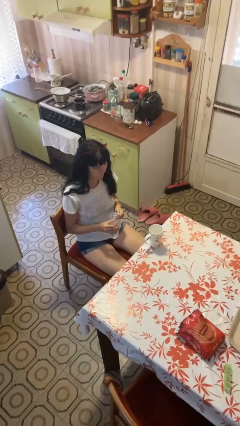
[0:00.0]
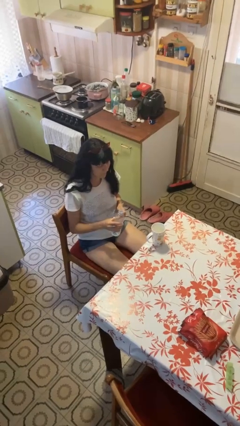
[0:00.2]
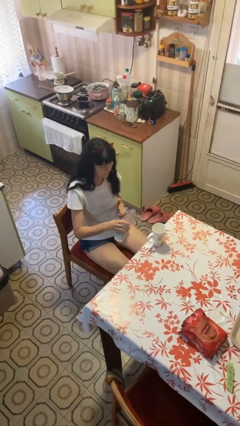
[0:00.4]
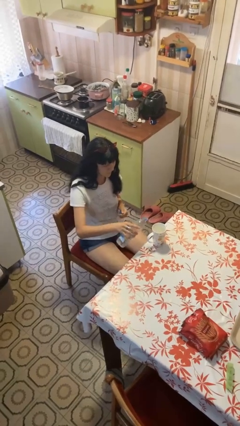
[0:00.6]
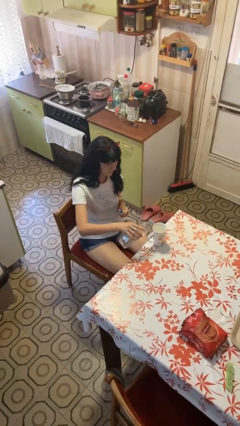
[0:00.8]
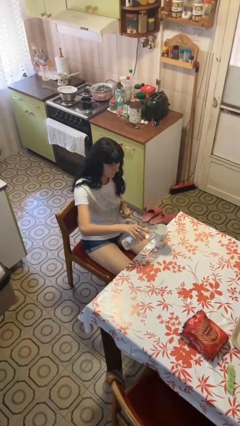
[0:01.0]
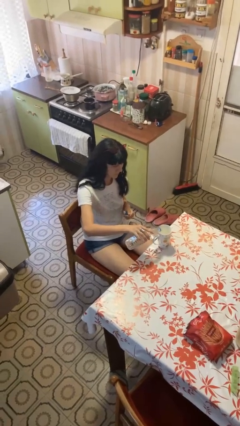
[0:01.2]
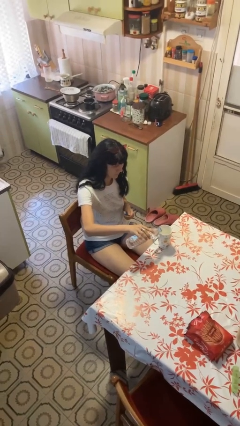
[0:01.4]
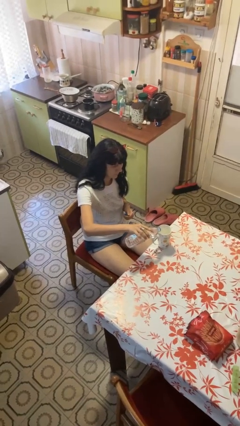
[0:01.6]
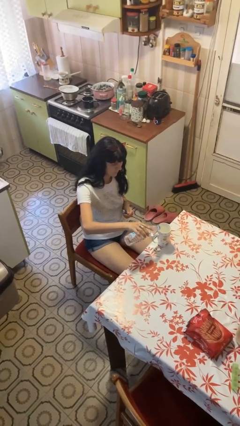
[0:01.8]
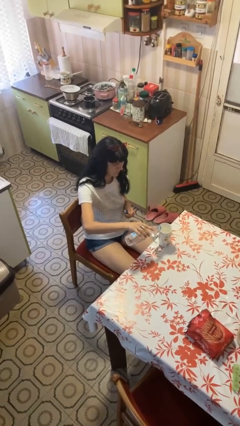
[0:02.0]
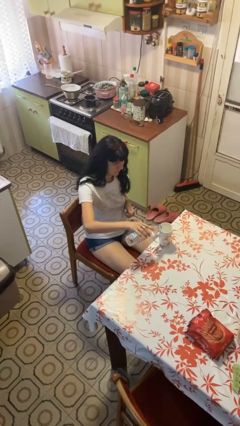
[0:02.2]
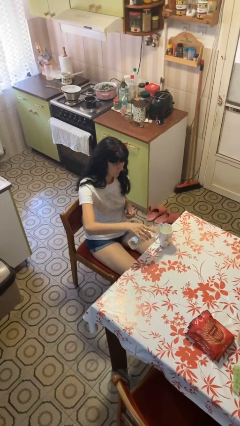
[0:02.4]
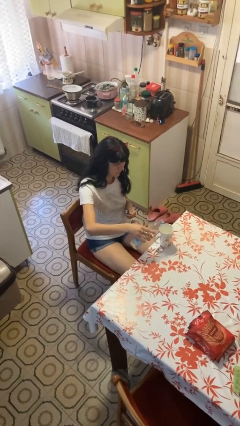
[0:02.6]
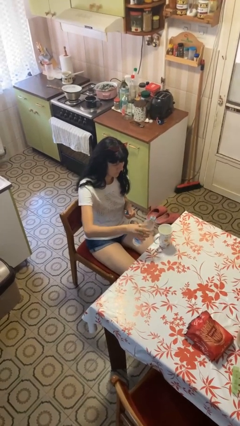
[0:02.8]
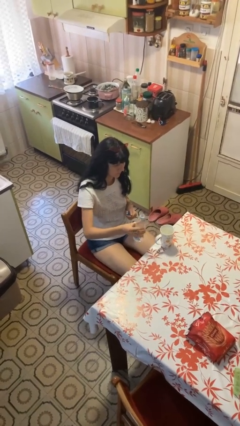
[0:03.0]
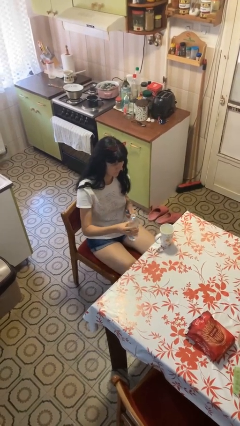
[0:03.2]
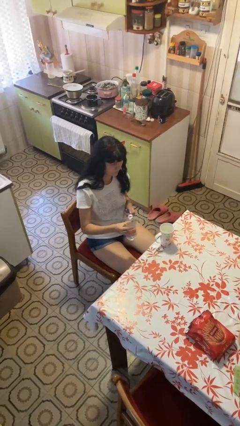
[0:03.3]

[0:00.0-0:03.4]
person pours liquid into cup

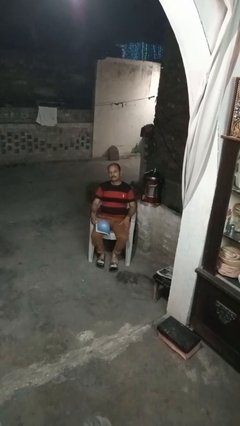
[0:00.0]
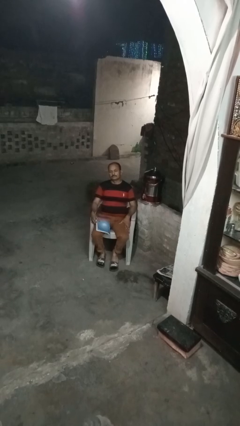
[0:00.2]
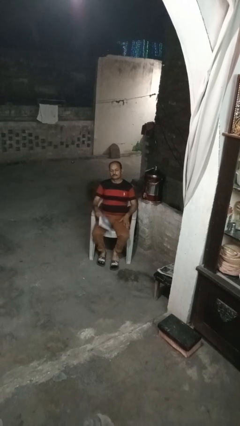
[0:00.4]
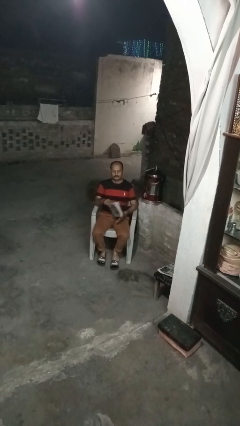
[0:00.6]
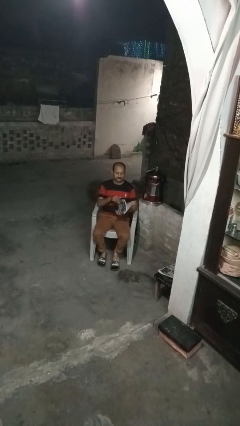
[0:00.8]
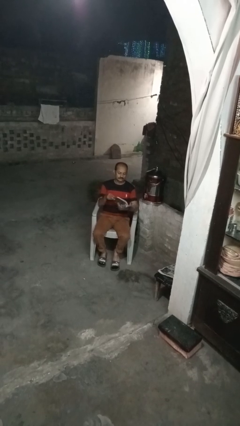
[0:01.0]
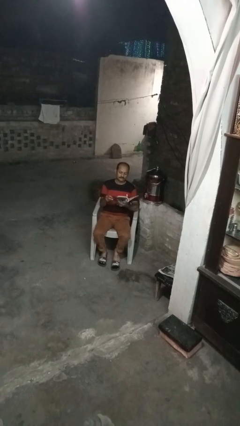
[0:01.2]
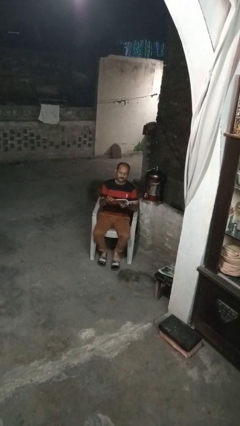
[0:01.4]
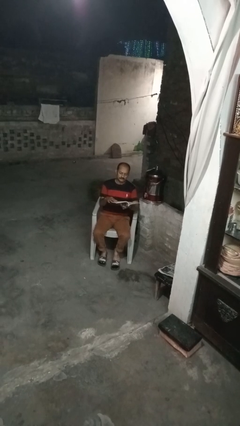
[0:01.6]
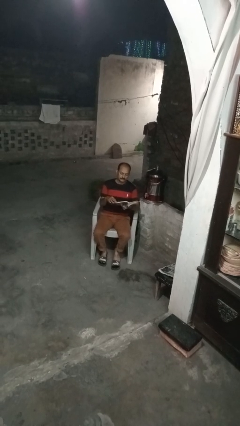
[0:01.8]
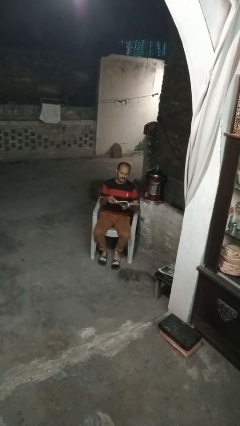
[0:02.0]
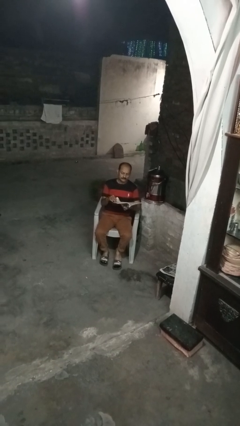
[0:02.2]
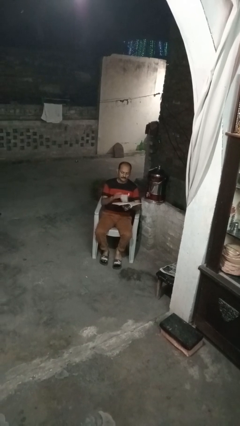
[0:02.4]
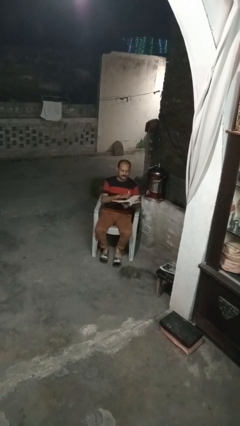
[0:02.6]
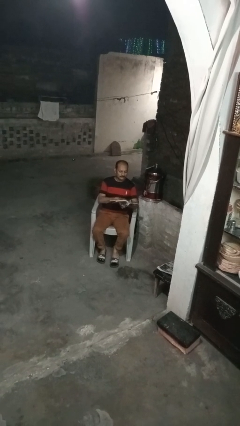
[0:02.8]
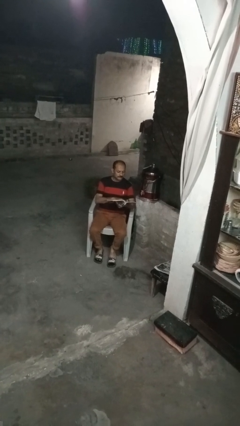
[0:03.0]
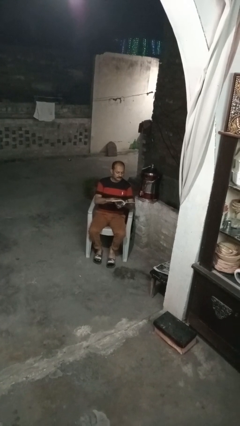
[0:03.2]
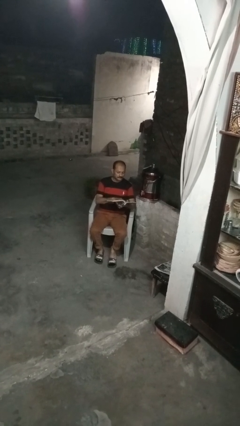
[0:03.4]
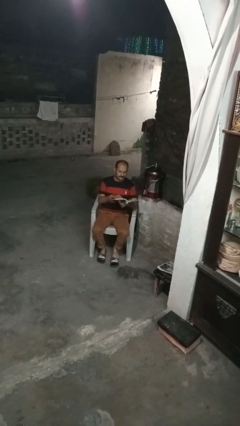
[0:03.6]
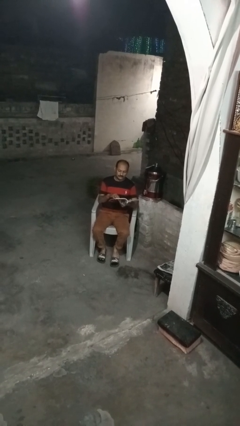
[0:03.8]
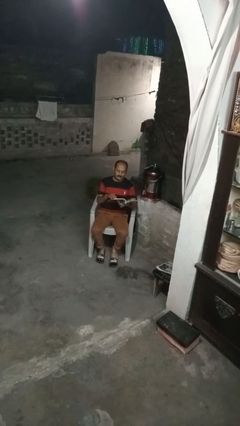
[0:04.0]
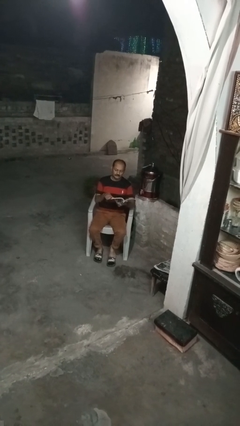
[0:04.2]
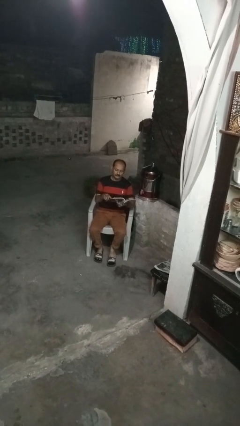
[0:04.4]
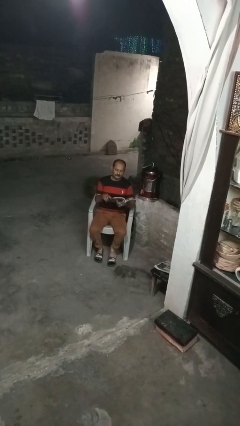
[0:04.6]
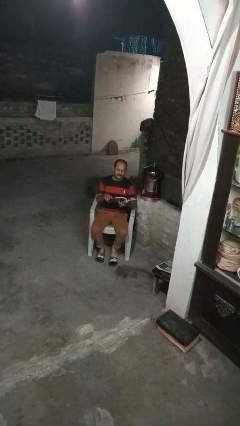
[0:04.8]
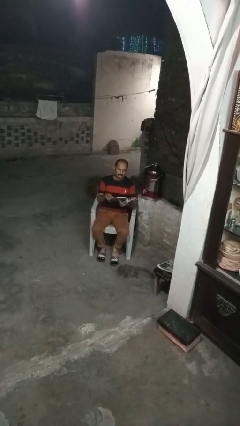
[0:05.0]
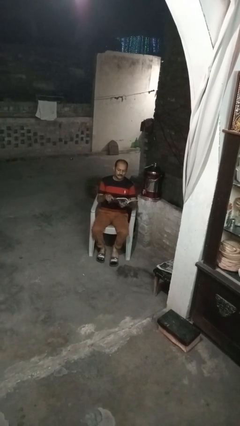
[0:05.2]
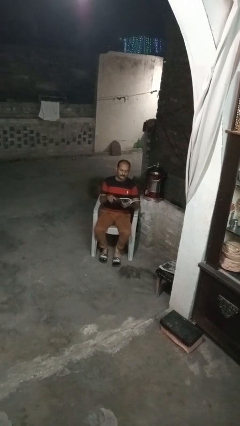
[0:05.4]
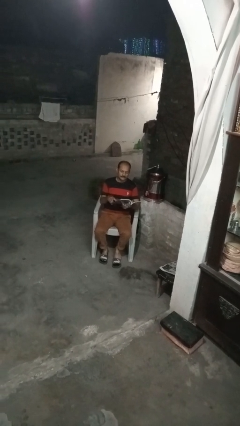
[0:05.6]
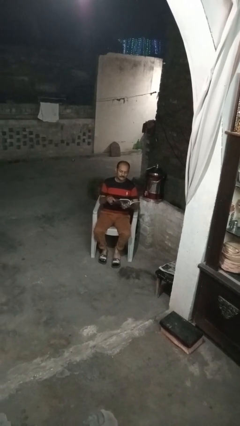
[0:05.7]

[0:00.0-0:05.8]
person reads book

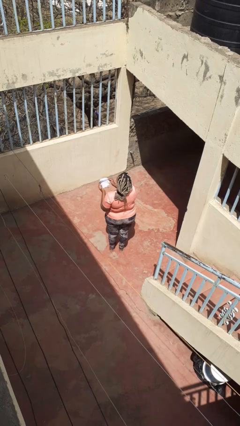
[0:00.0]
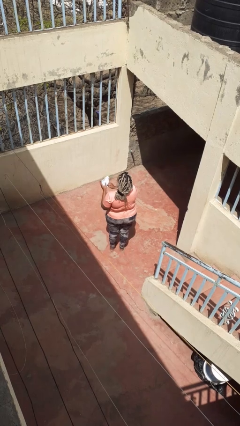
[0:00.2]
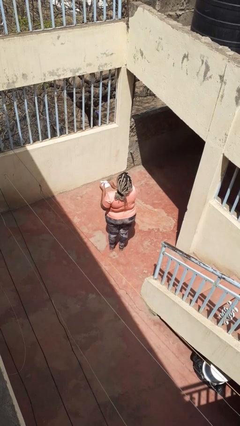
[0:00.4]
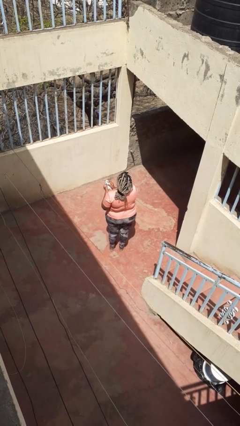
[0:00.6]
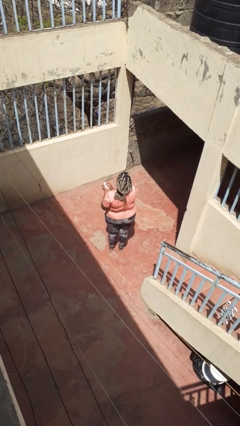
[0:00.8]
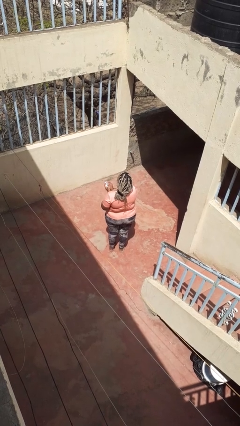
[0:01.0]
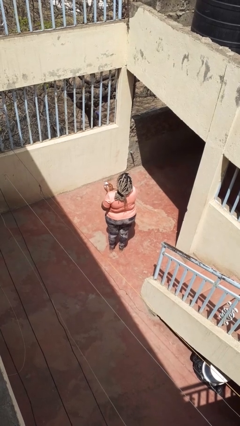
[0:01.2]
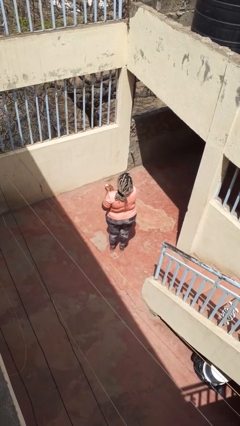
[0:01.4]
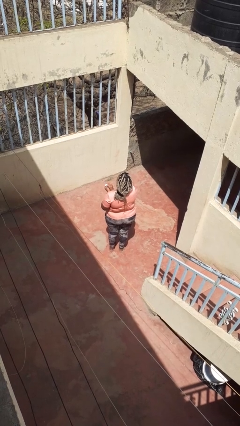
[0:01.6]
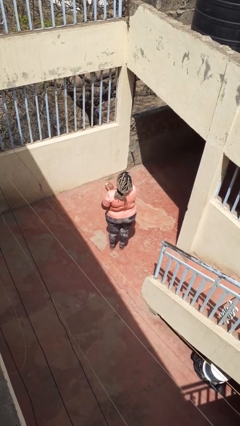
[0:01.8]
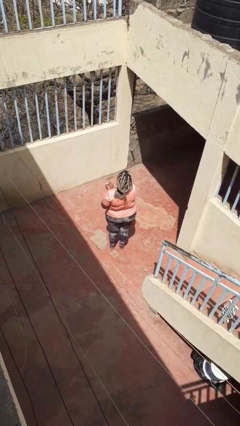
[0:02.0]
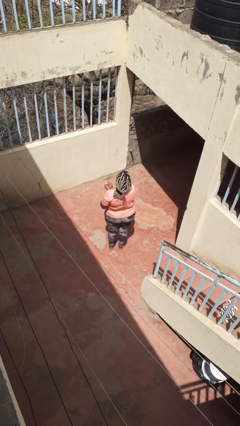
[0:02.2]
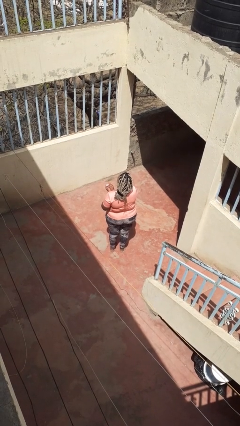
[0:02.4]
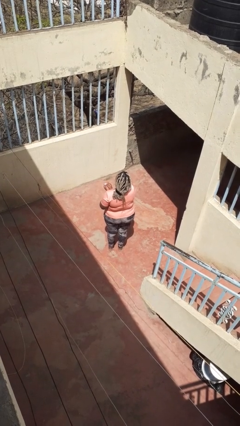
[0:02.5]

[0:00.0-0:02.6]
person crumples paper

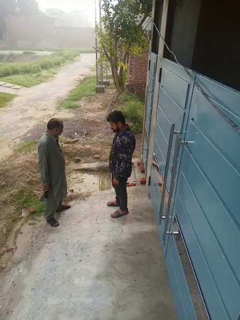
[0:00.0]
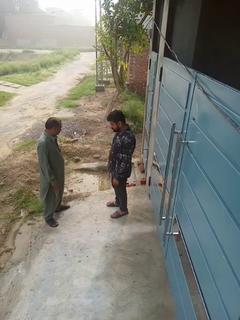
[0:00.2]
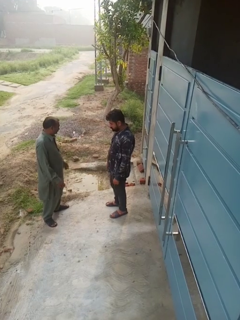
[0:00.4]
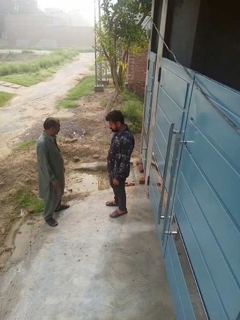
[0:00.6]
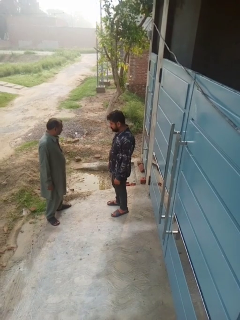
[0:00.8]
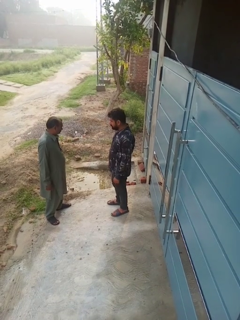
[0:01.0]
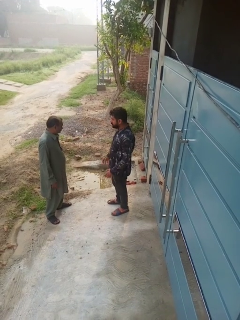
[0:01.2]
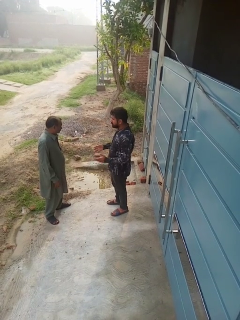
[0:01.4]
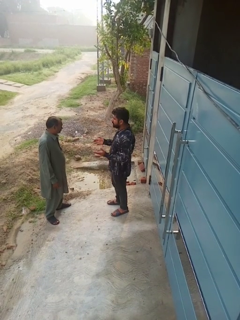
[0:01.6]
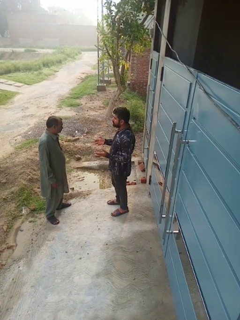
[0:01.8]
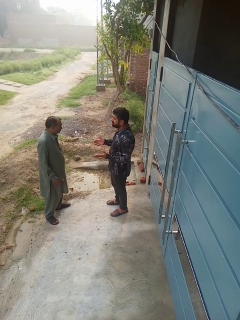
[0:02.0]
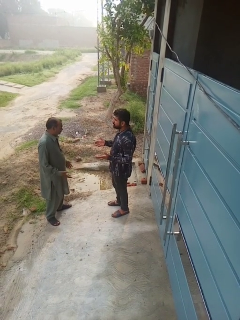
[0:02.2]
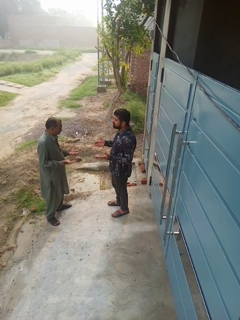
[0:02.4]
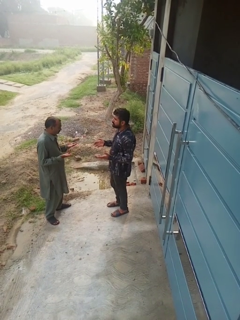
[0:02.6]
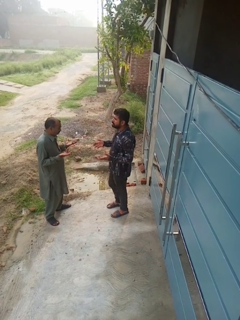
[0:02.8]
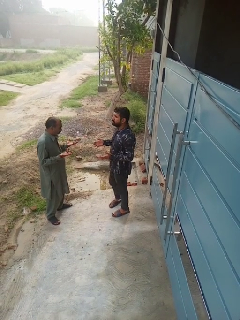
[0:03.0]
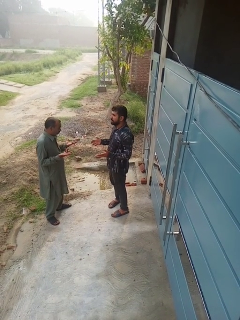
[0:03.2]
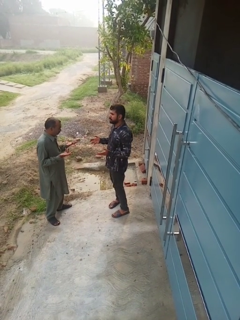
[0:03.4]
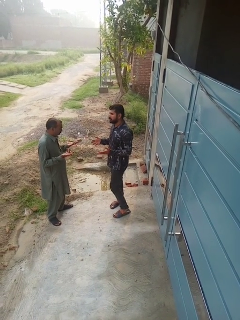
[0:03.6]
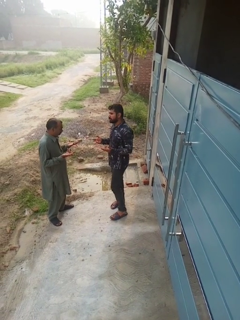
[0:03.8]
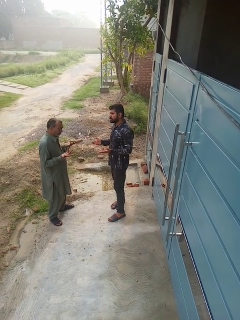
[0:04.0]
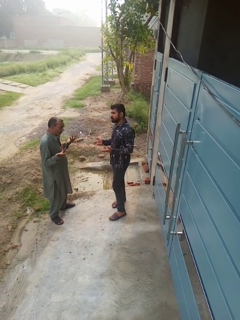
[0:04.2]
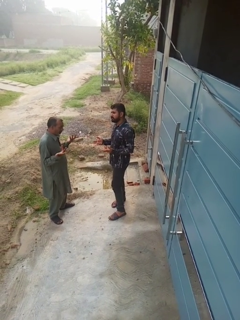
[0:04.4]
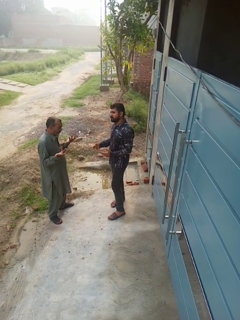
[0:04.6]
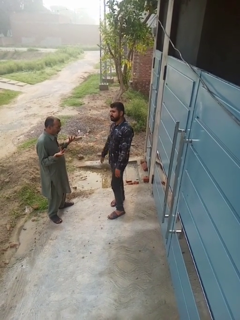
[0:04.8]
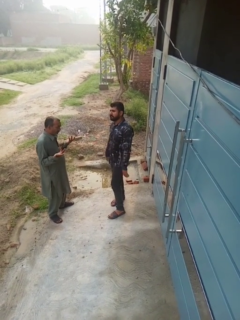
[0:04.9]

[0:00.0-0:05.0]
person talks to person

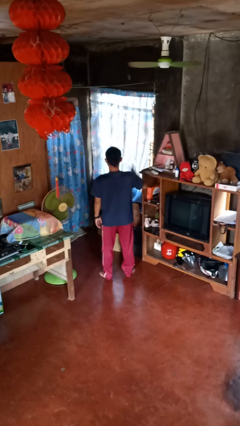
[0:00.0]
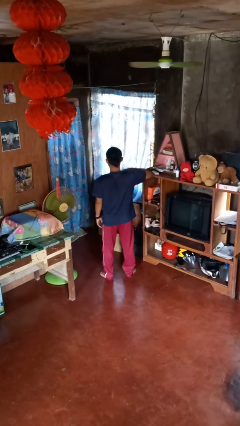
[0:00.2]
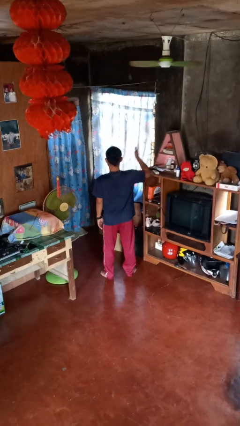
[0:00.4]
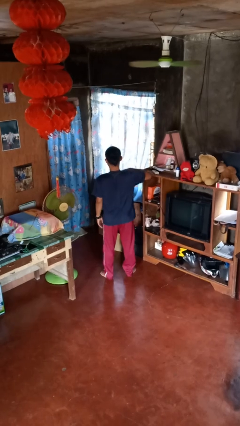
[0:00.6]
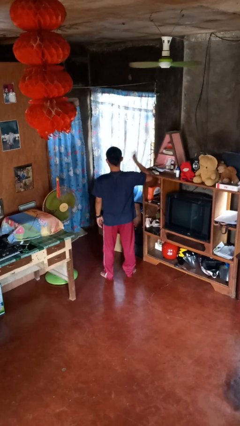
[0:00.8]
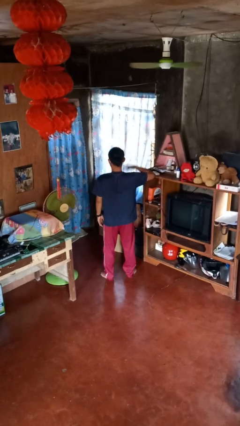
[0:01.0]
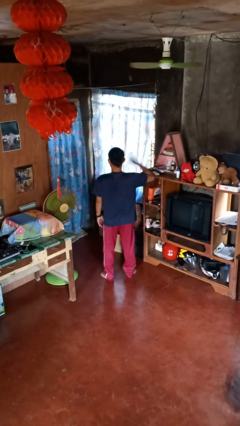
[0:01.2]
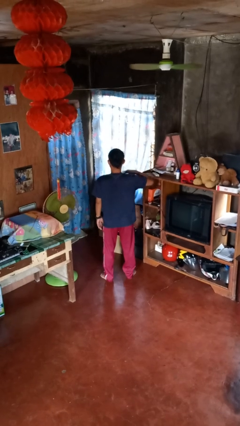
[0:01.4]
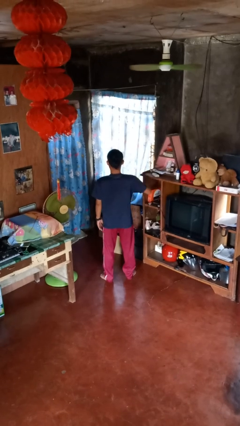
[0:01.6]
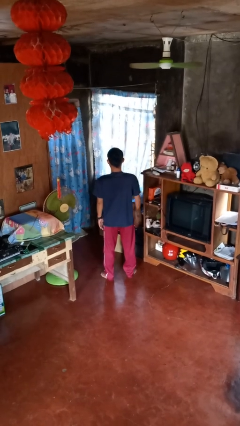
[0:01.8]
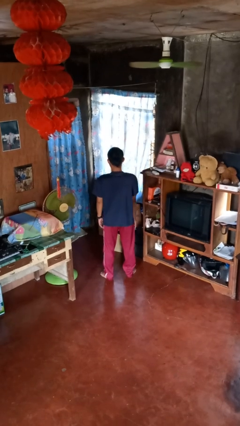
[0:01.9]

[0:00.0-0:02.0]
person drums on chest
